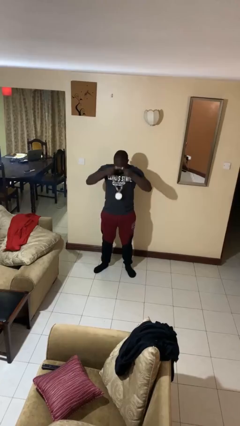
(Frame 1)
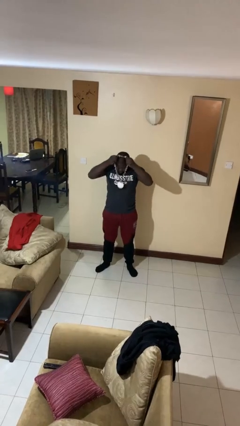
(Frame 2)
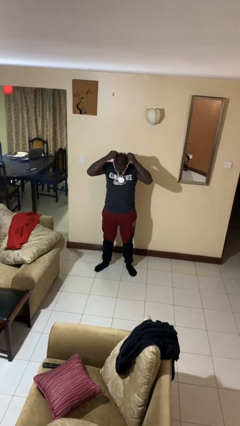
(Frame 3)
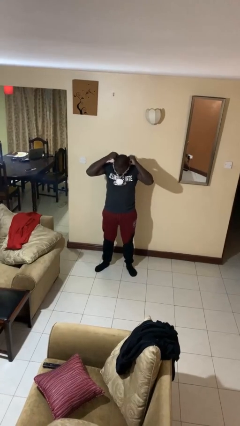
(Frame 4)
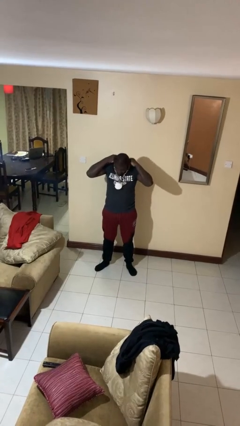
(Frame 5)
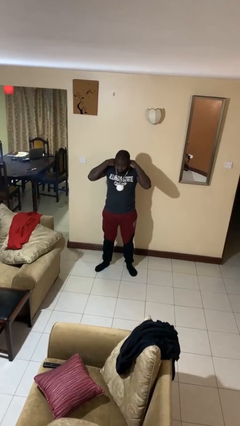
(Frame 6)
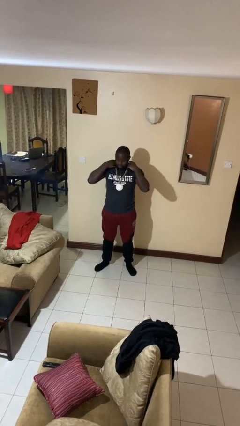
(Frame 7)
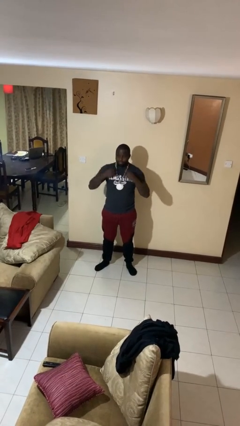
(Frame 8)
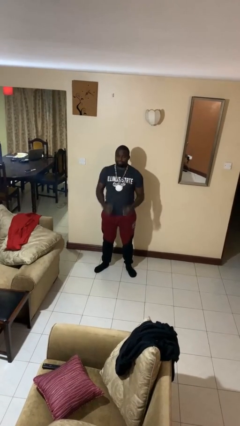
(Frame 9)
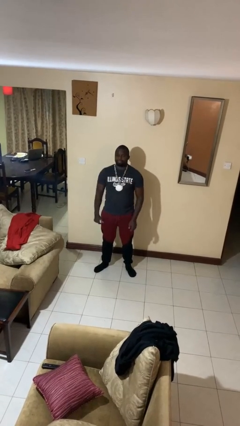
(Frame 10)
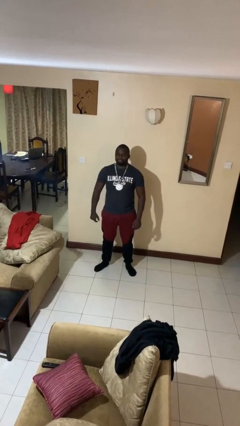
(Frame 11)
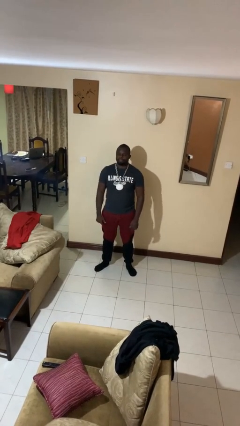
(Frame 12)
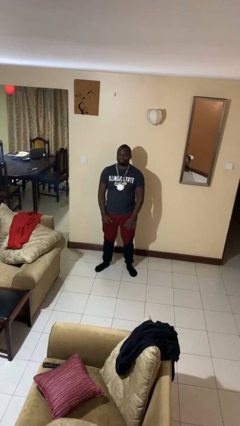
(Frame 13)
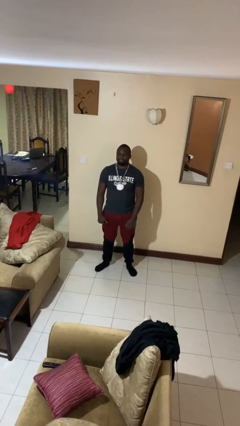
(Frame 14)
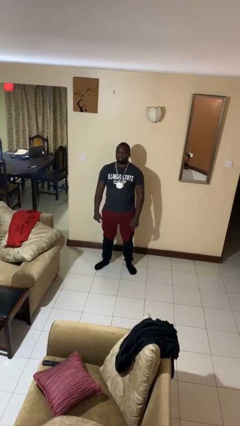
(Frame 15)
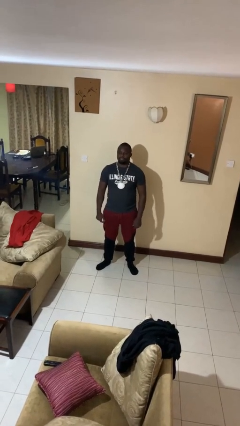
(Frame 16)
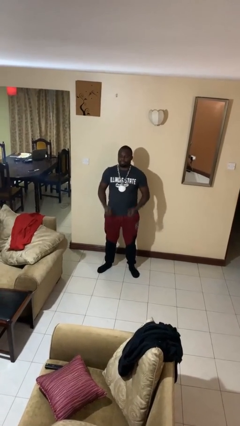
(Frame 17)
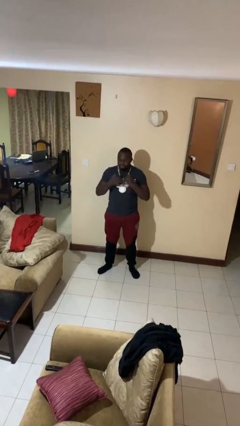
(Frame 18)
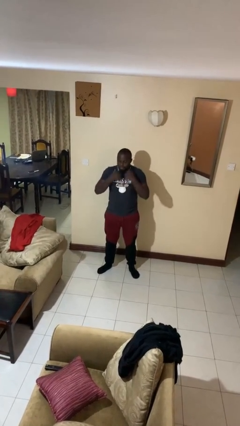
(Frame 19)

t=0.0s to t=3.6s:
person puts on necklace

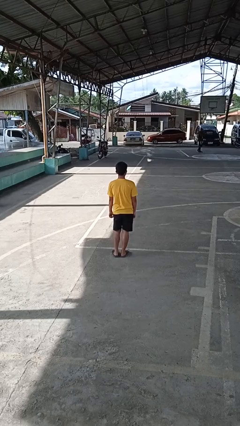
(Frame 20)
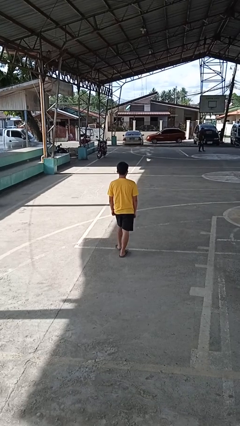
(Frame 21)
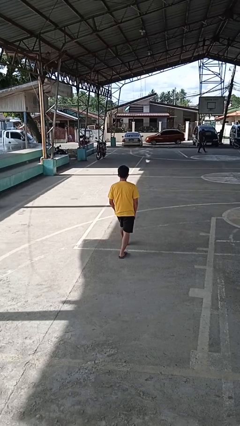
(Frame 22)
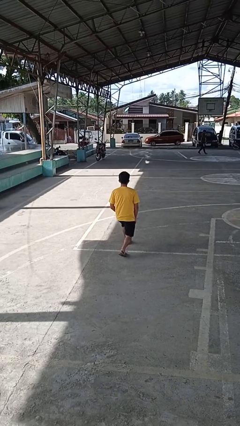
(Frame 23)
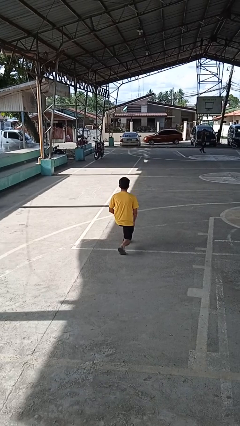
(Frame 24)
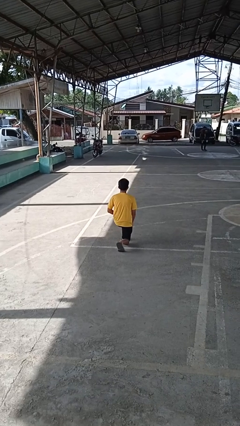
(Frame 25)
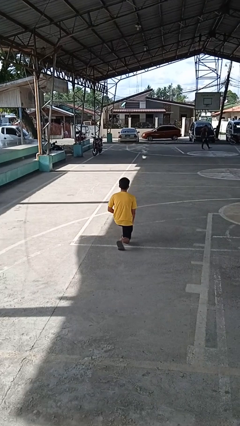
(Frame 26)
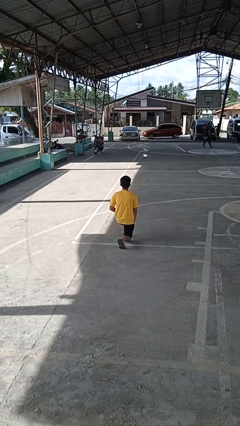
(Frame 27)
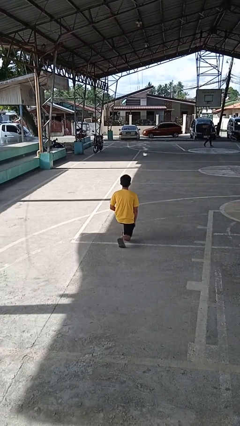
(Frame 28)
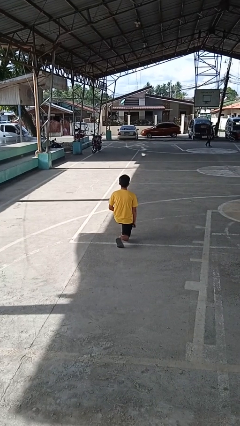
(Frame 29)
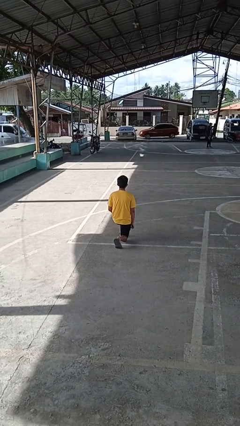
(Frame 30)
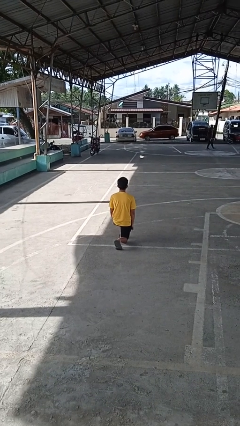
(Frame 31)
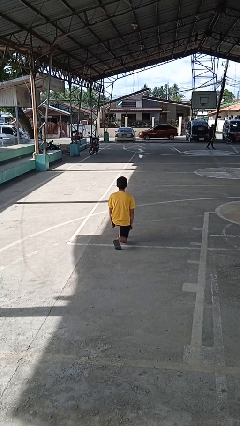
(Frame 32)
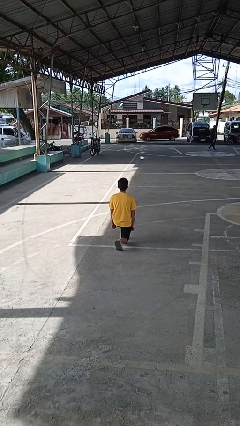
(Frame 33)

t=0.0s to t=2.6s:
person kneels

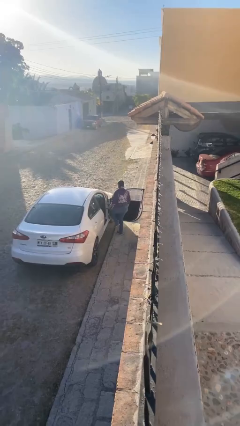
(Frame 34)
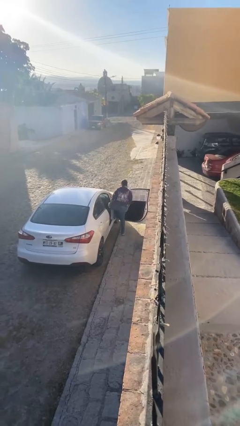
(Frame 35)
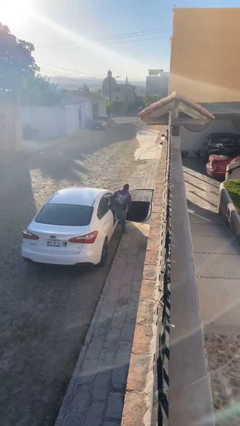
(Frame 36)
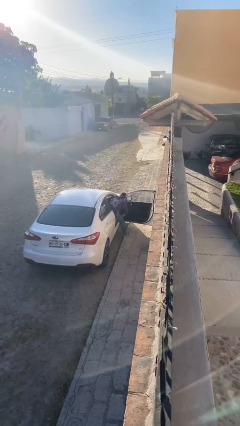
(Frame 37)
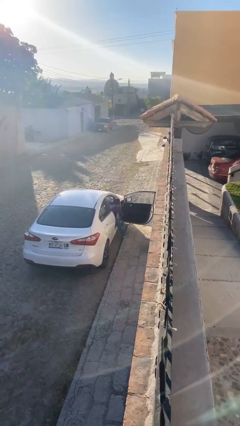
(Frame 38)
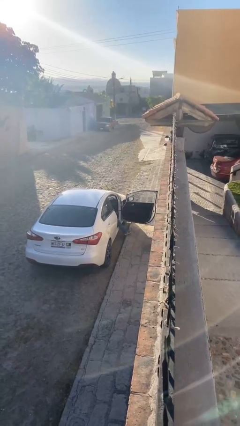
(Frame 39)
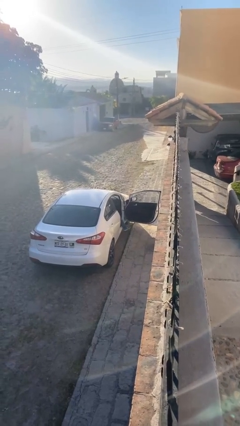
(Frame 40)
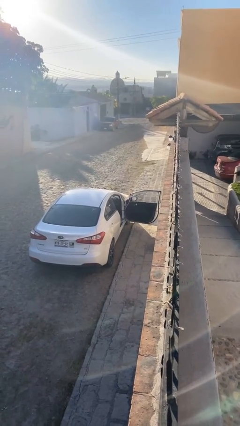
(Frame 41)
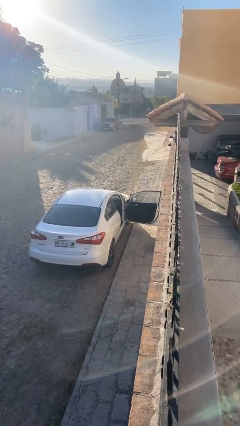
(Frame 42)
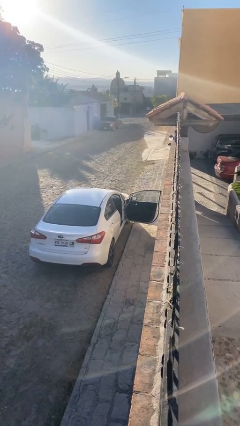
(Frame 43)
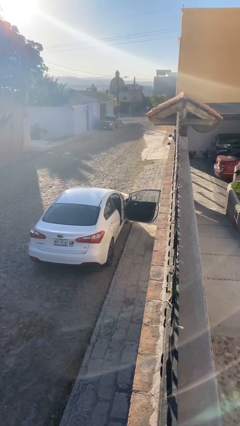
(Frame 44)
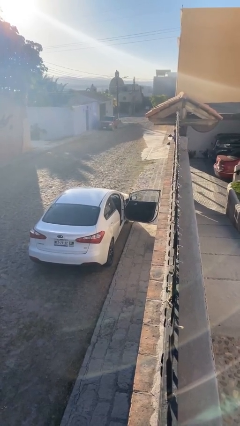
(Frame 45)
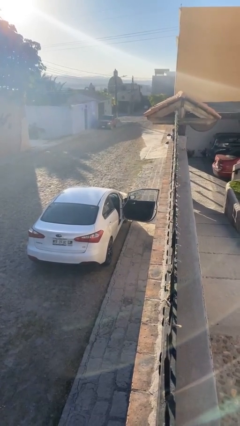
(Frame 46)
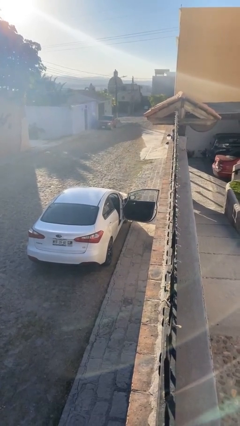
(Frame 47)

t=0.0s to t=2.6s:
person enters car

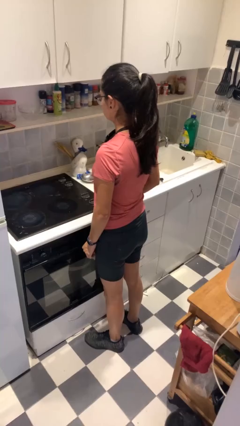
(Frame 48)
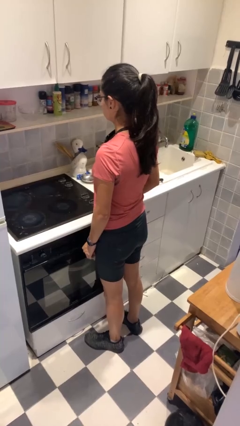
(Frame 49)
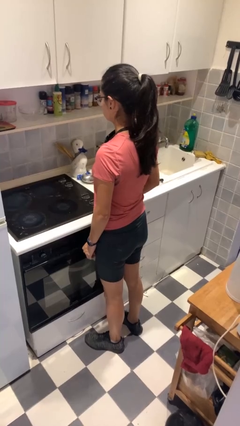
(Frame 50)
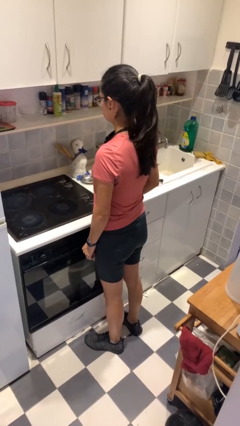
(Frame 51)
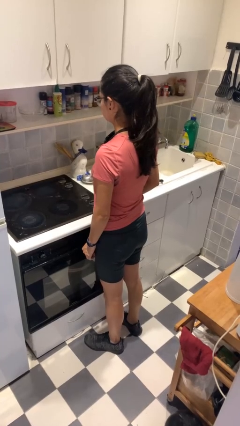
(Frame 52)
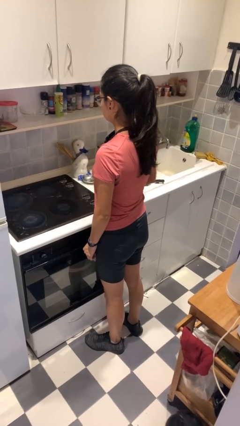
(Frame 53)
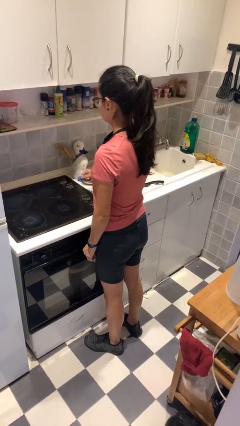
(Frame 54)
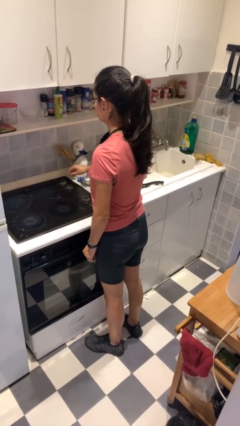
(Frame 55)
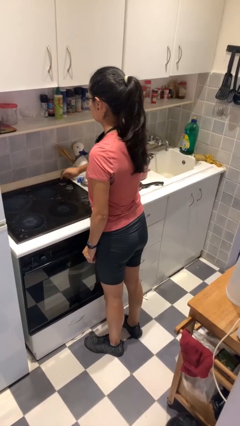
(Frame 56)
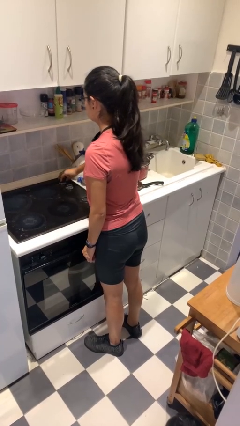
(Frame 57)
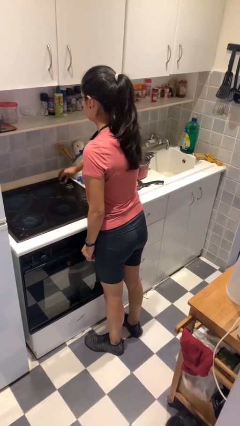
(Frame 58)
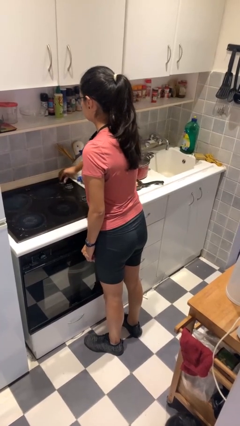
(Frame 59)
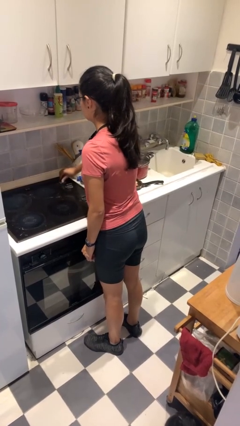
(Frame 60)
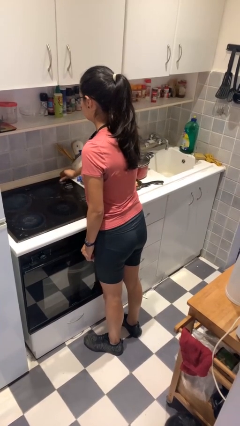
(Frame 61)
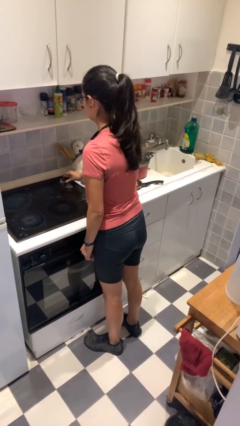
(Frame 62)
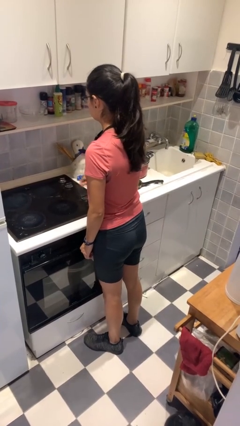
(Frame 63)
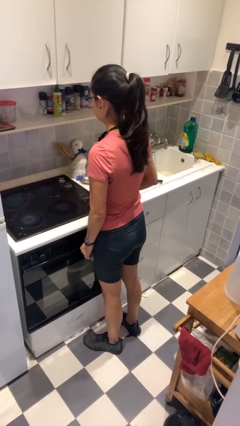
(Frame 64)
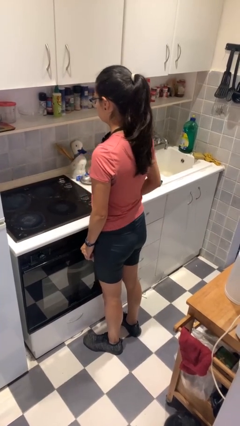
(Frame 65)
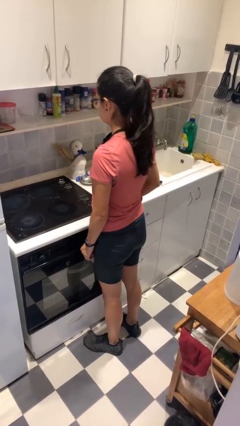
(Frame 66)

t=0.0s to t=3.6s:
person turns off stovetop

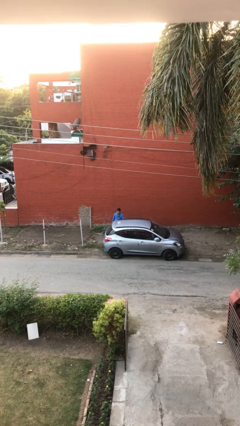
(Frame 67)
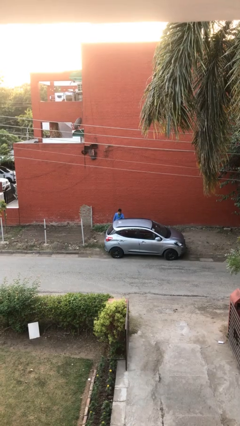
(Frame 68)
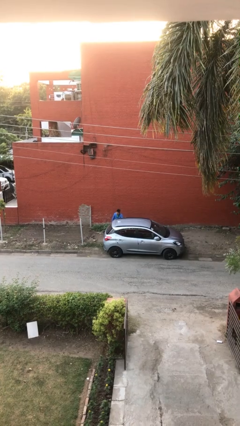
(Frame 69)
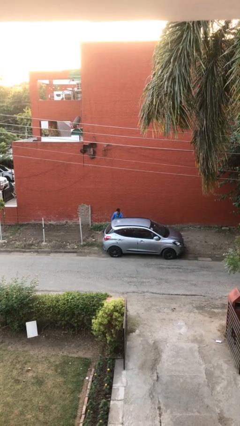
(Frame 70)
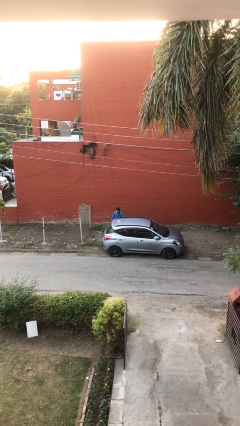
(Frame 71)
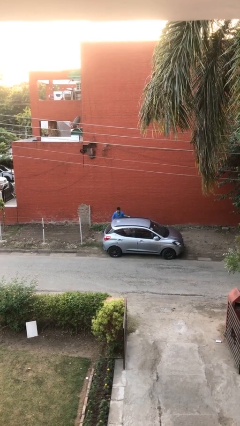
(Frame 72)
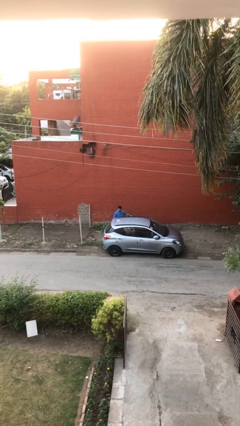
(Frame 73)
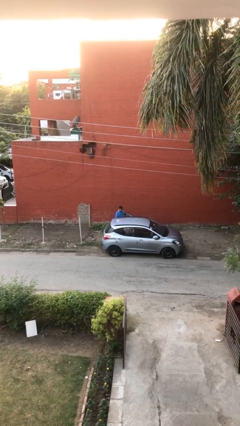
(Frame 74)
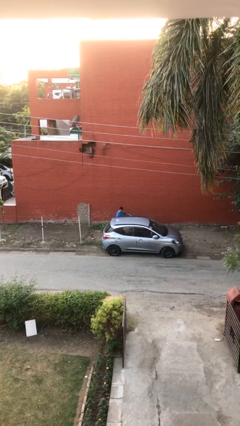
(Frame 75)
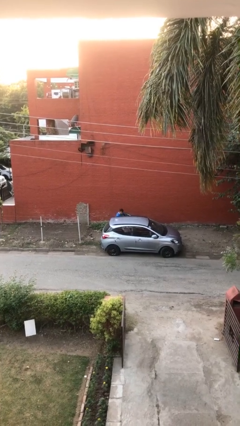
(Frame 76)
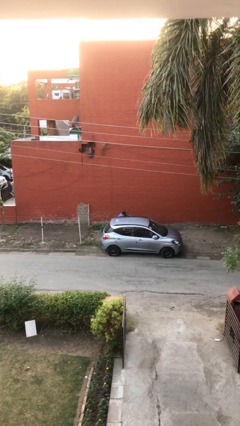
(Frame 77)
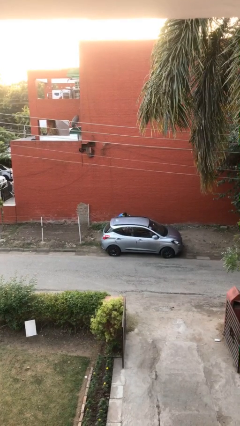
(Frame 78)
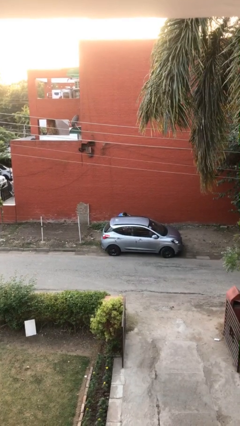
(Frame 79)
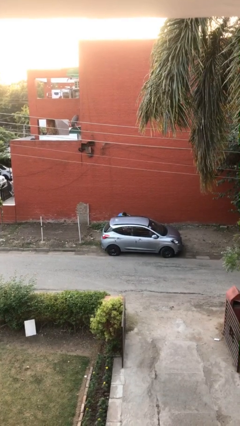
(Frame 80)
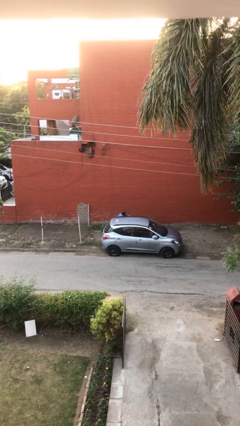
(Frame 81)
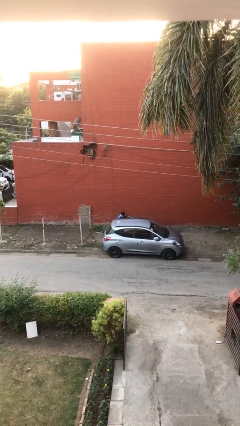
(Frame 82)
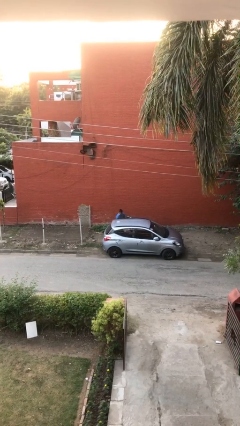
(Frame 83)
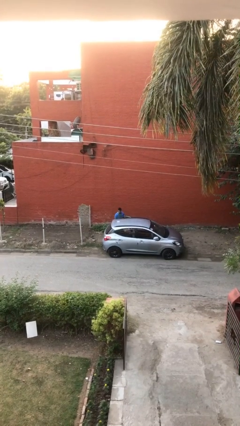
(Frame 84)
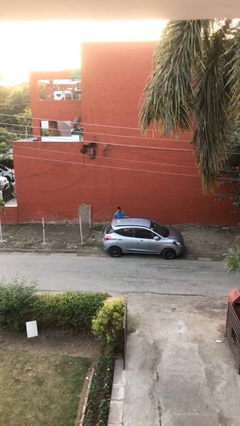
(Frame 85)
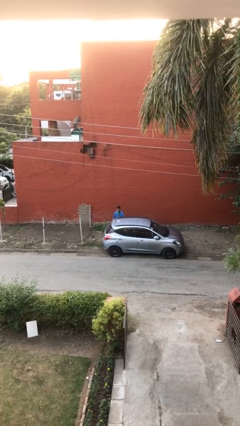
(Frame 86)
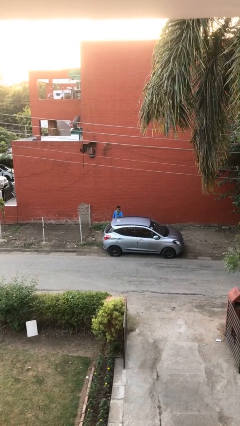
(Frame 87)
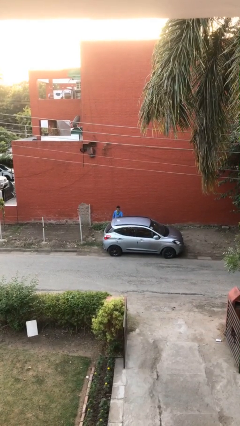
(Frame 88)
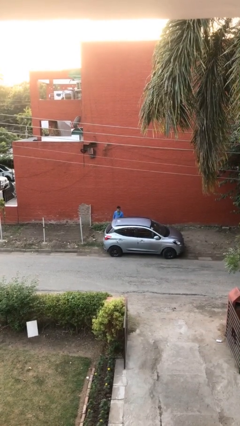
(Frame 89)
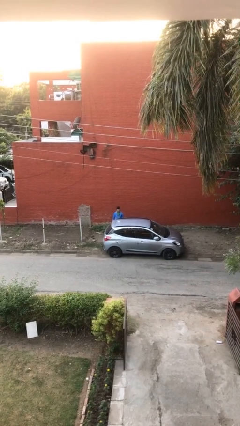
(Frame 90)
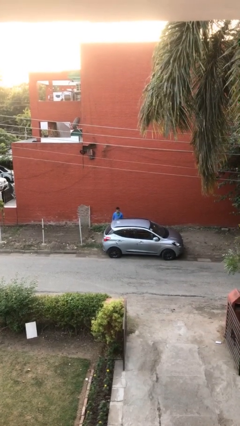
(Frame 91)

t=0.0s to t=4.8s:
person loads car
